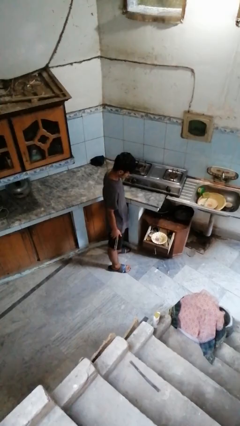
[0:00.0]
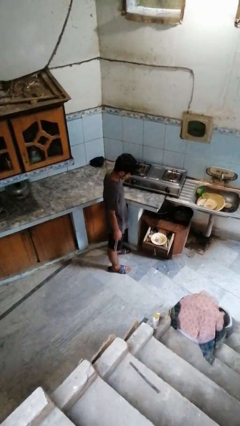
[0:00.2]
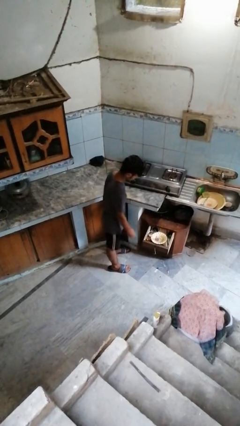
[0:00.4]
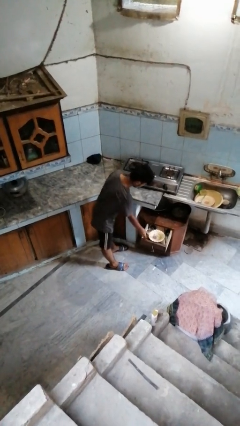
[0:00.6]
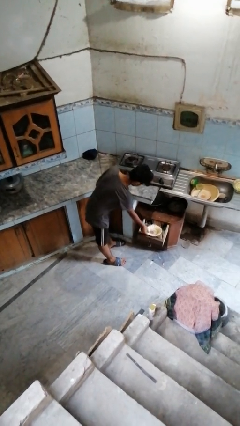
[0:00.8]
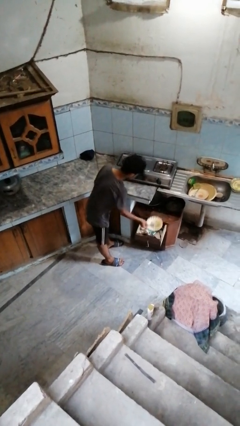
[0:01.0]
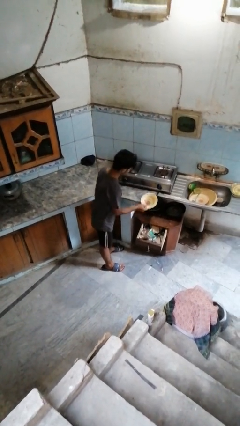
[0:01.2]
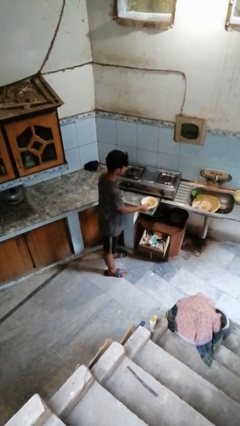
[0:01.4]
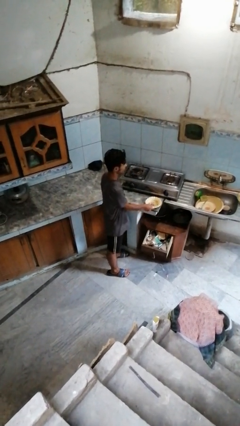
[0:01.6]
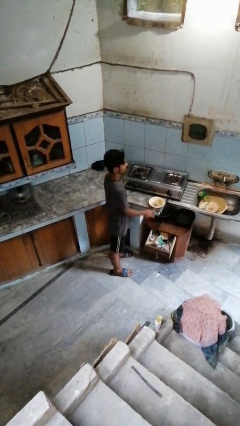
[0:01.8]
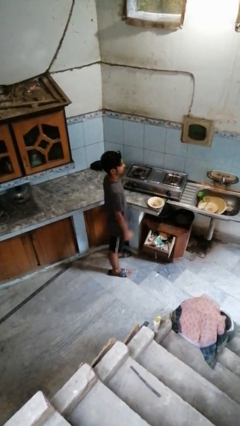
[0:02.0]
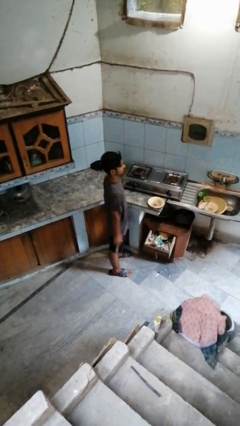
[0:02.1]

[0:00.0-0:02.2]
person takes object from kitchen drawer

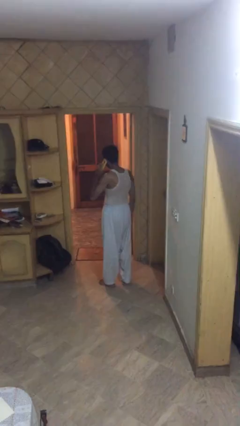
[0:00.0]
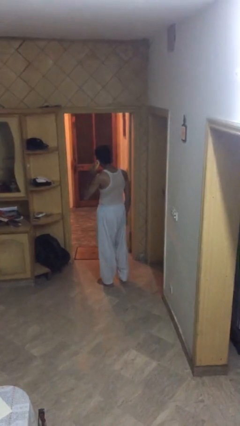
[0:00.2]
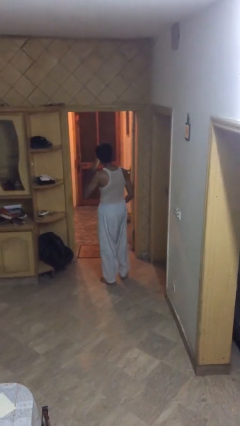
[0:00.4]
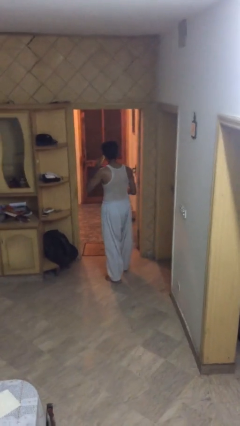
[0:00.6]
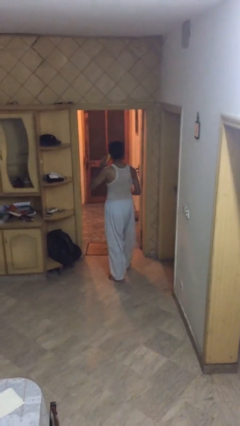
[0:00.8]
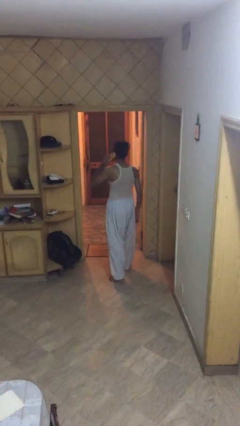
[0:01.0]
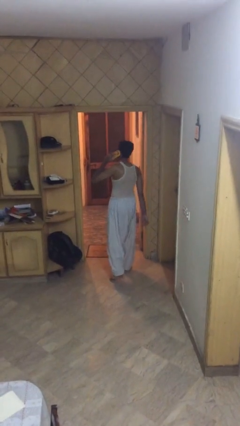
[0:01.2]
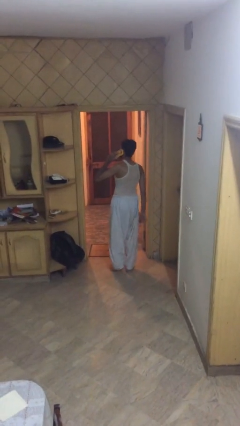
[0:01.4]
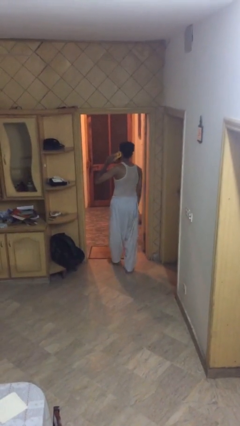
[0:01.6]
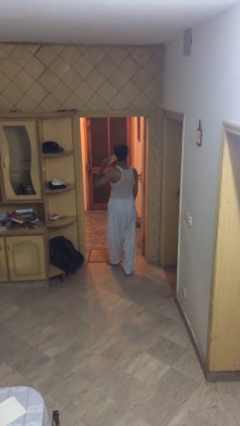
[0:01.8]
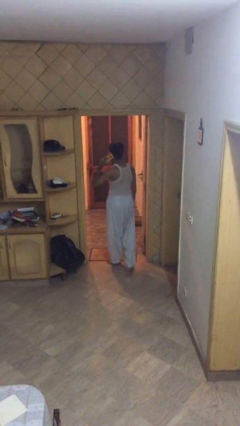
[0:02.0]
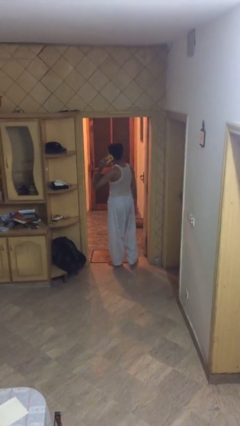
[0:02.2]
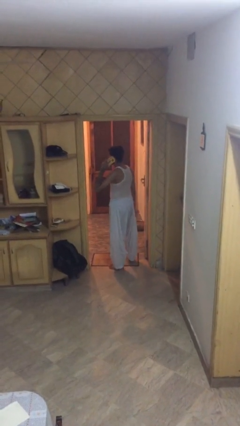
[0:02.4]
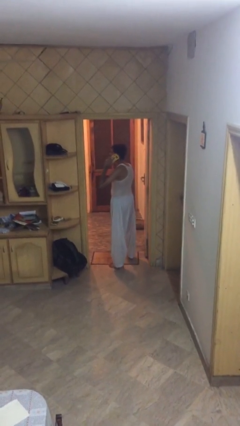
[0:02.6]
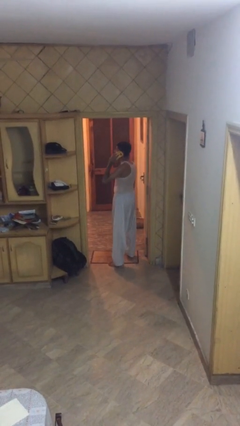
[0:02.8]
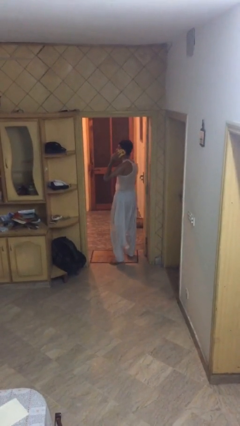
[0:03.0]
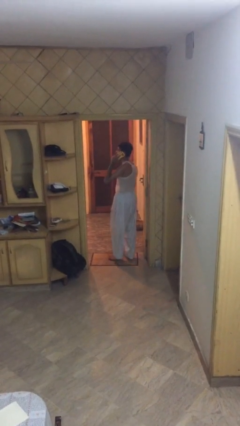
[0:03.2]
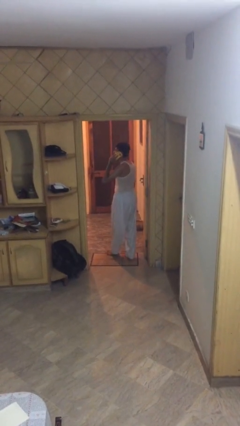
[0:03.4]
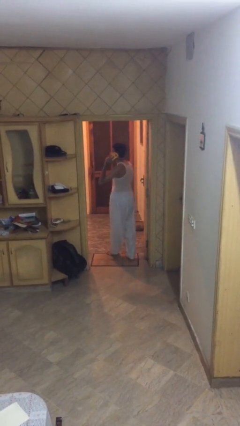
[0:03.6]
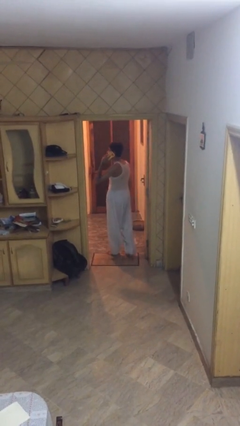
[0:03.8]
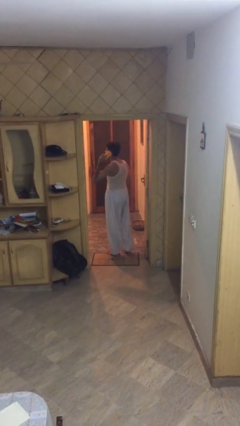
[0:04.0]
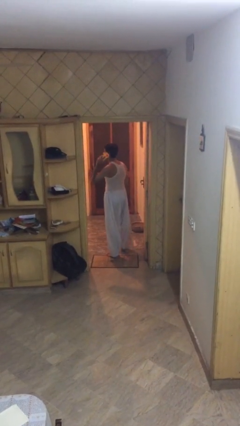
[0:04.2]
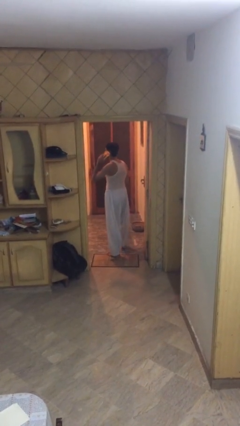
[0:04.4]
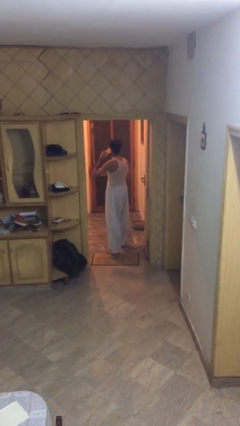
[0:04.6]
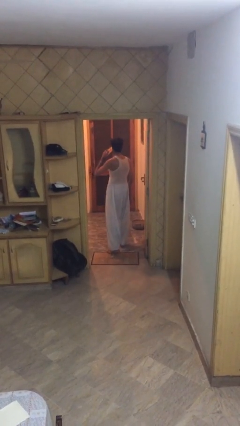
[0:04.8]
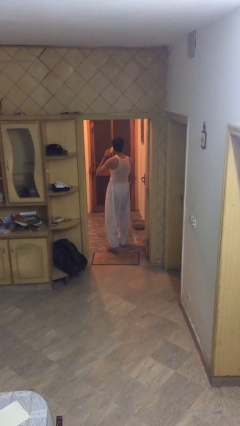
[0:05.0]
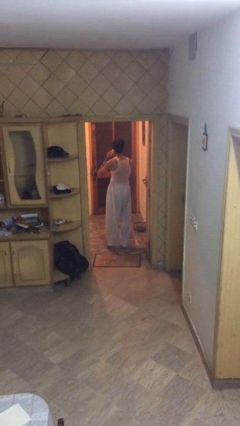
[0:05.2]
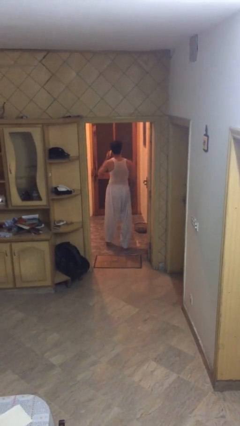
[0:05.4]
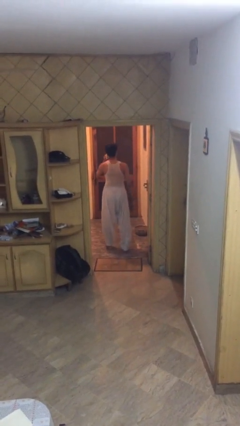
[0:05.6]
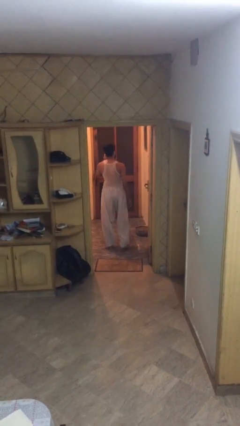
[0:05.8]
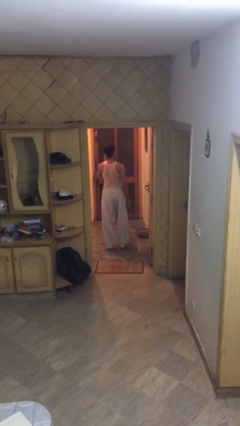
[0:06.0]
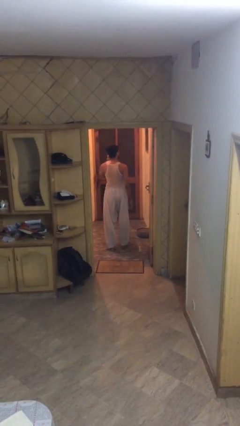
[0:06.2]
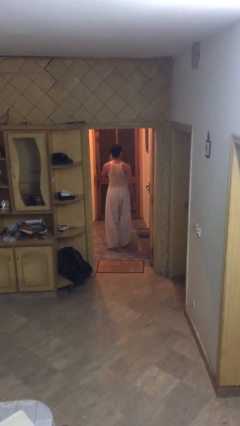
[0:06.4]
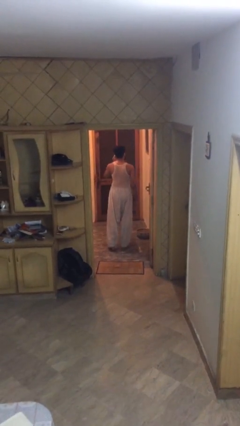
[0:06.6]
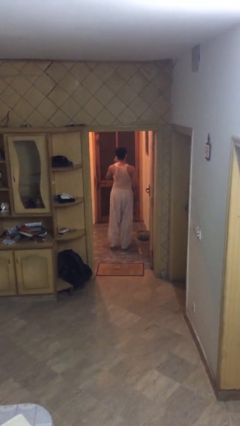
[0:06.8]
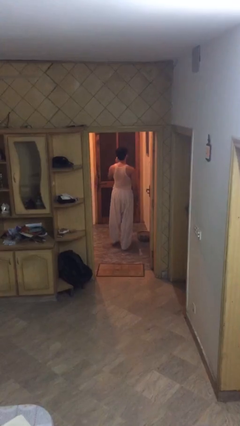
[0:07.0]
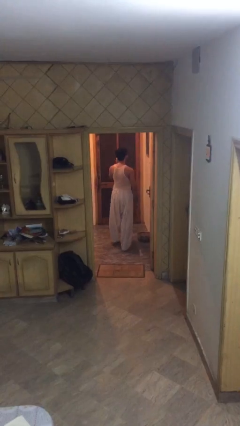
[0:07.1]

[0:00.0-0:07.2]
person exits scene through structure

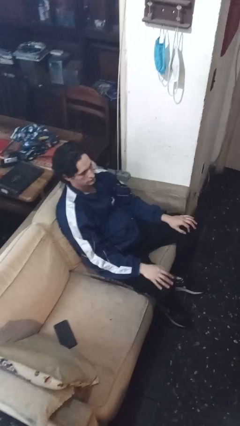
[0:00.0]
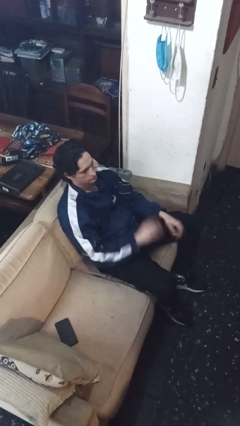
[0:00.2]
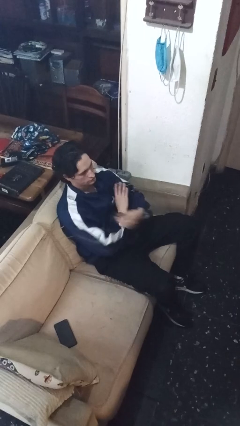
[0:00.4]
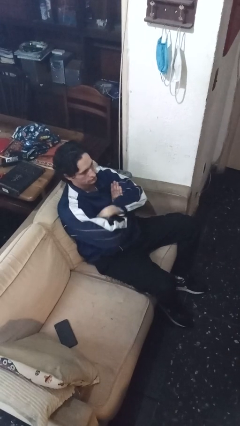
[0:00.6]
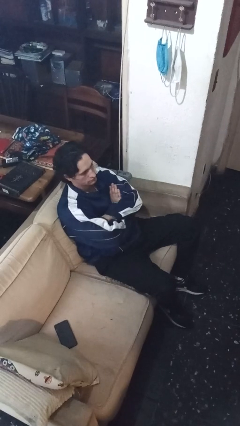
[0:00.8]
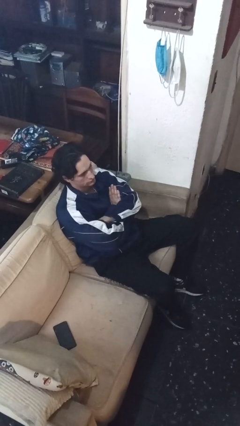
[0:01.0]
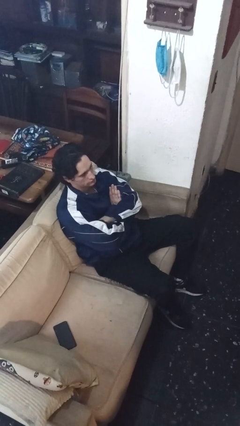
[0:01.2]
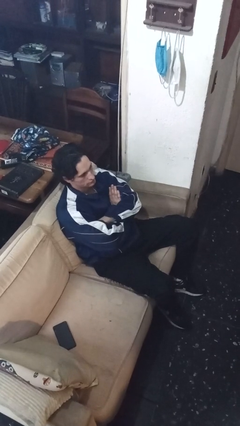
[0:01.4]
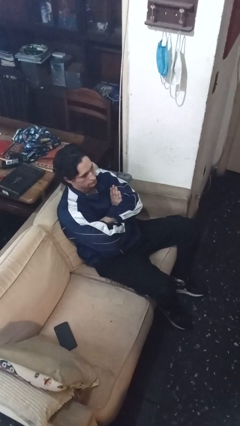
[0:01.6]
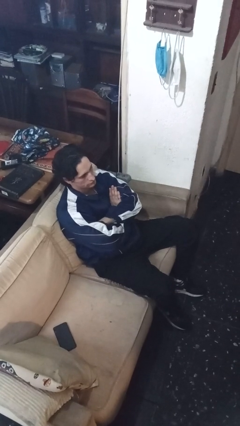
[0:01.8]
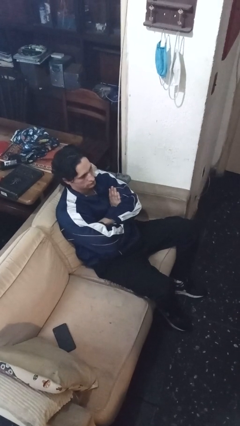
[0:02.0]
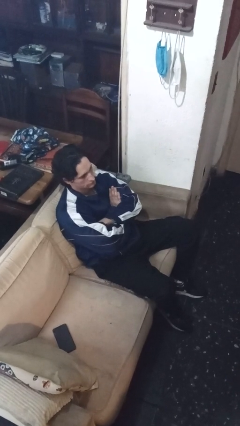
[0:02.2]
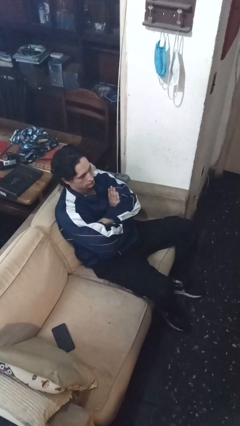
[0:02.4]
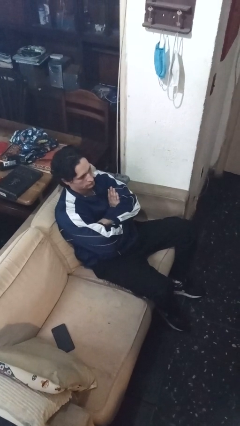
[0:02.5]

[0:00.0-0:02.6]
person crosses arms

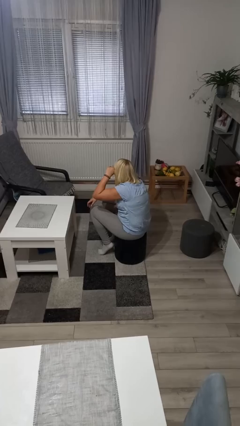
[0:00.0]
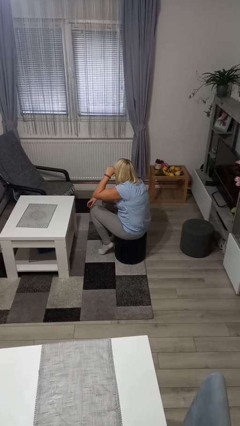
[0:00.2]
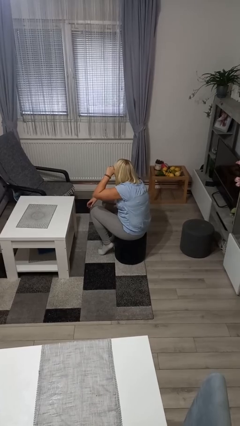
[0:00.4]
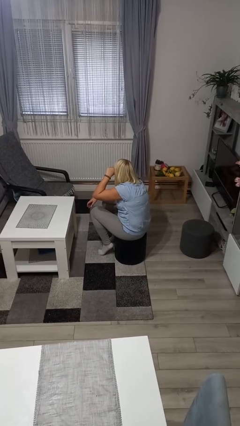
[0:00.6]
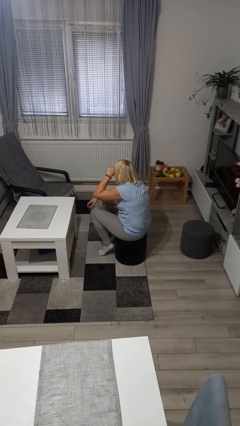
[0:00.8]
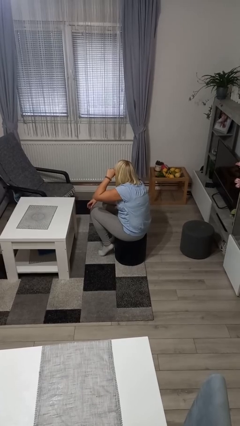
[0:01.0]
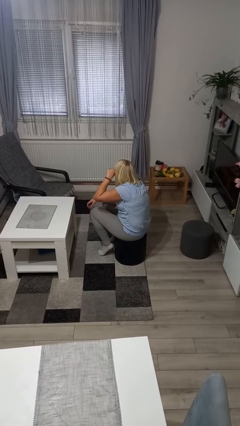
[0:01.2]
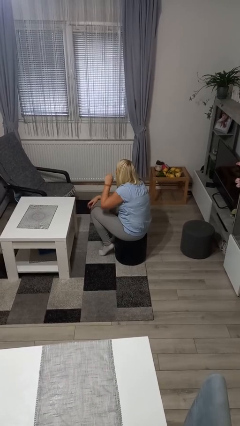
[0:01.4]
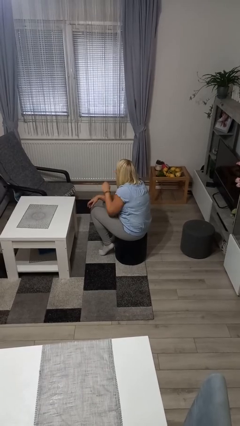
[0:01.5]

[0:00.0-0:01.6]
person rubs eyes

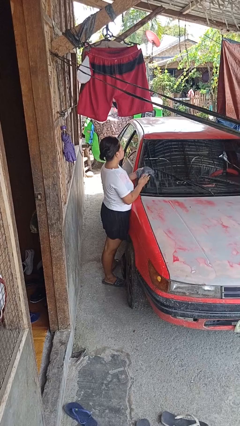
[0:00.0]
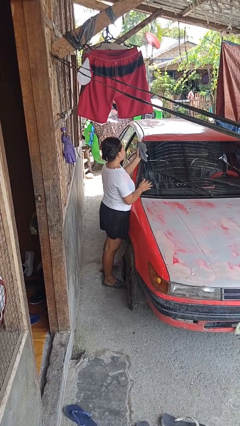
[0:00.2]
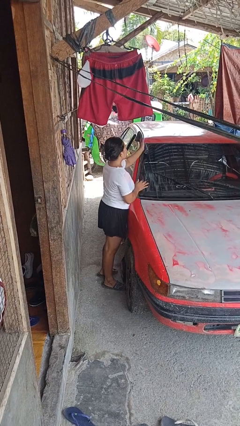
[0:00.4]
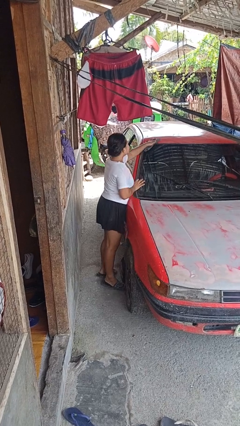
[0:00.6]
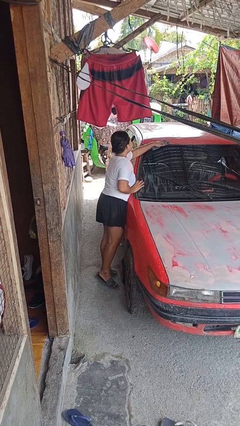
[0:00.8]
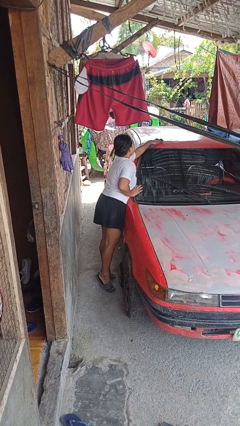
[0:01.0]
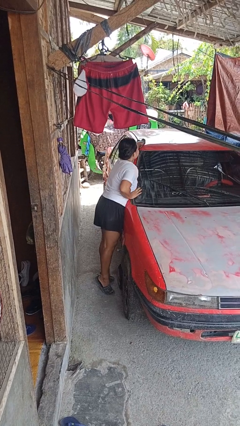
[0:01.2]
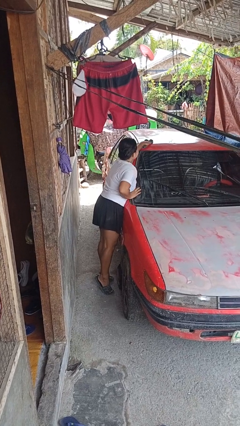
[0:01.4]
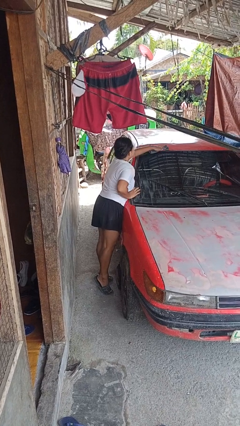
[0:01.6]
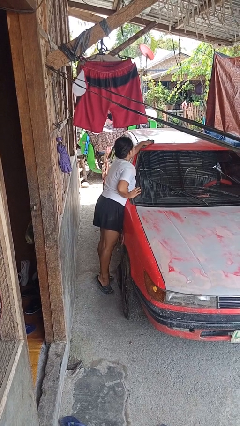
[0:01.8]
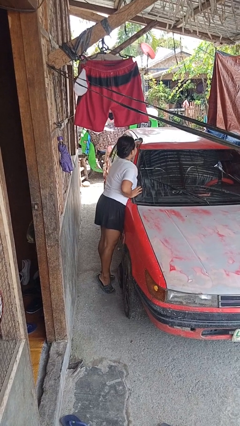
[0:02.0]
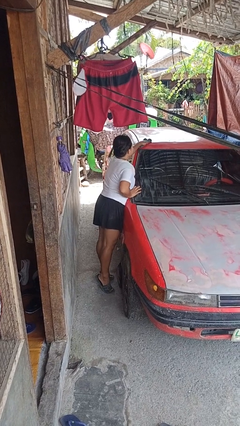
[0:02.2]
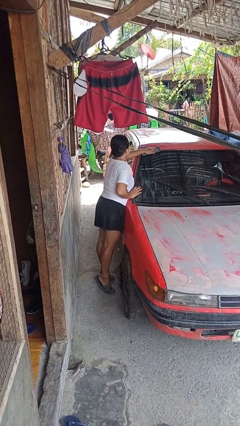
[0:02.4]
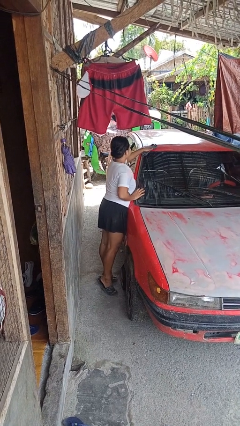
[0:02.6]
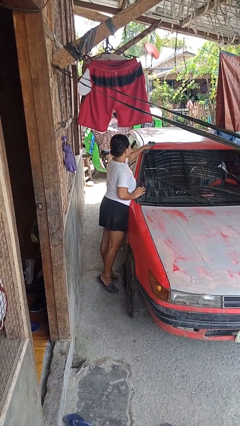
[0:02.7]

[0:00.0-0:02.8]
person polishes car with rag

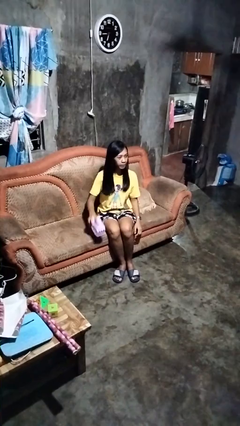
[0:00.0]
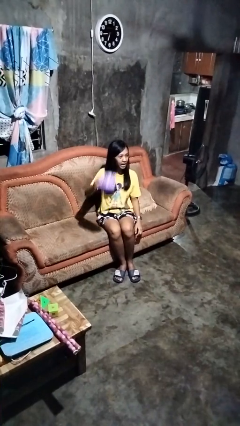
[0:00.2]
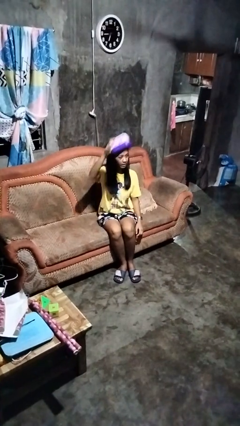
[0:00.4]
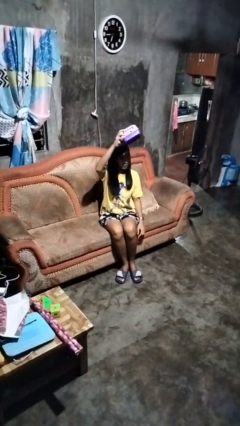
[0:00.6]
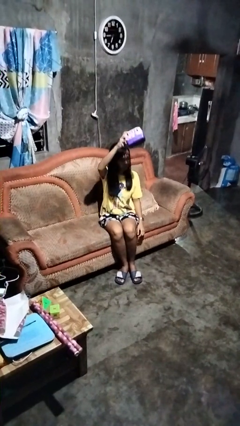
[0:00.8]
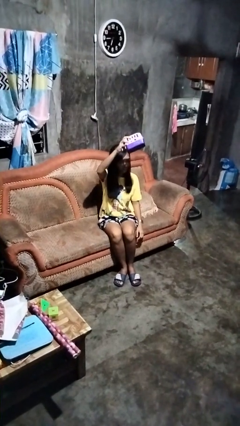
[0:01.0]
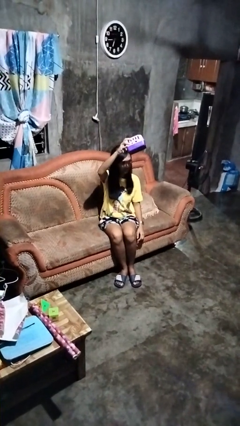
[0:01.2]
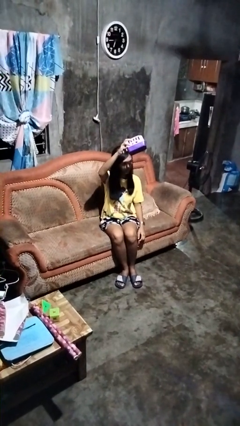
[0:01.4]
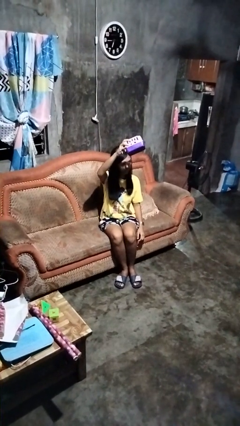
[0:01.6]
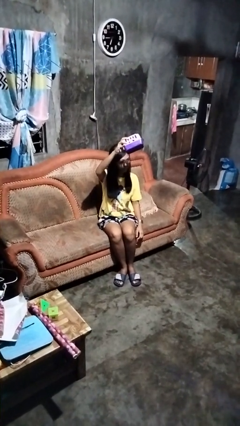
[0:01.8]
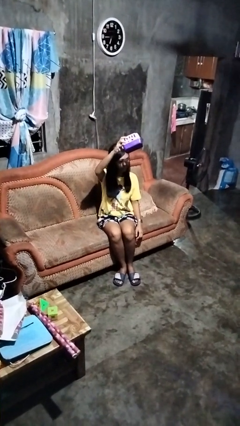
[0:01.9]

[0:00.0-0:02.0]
person holds object above head
